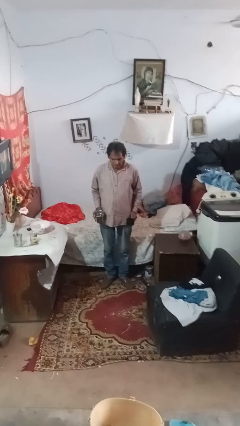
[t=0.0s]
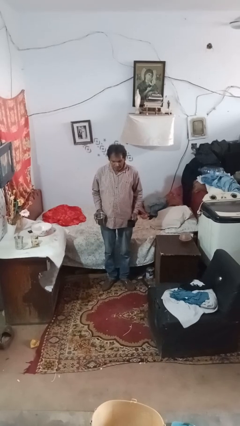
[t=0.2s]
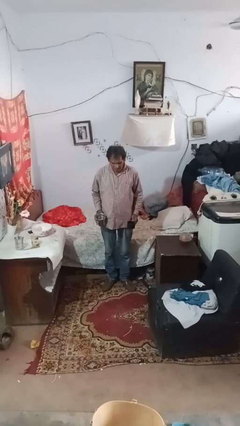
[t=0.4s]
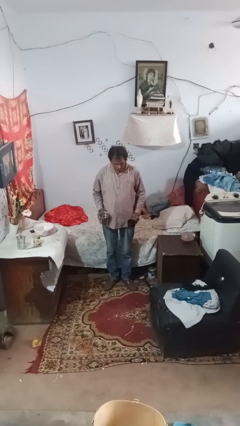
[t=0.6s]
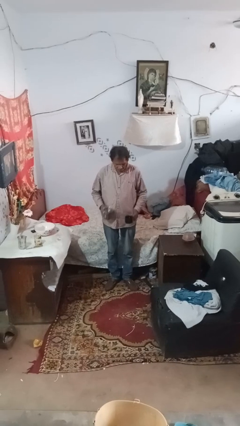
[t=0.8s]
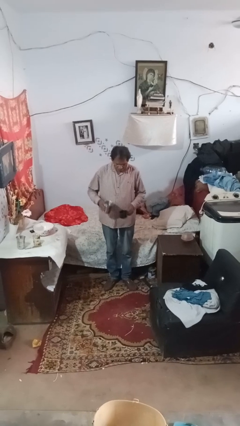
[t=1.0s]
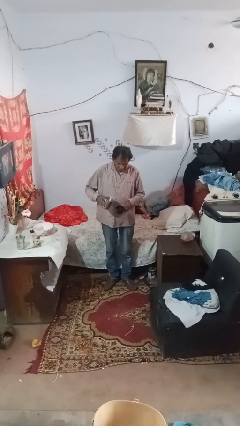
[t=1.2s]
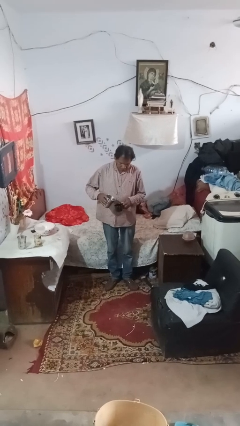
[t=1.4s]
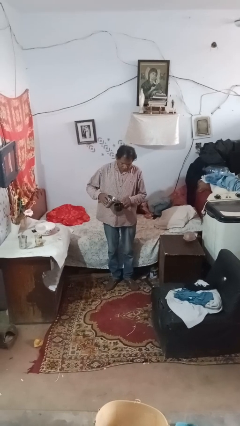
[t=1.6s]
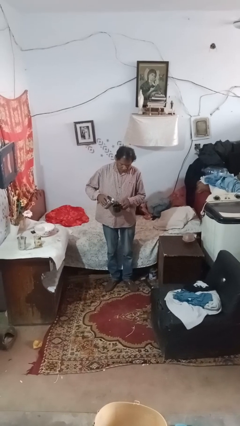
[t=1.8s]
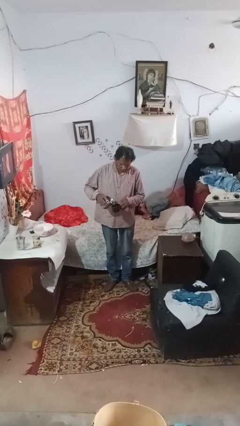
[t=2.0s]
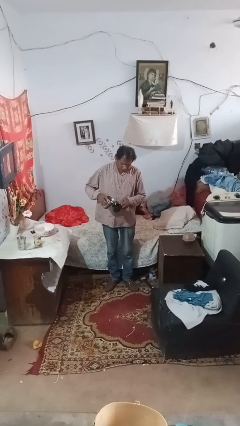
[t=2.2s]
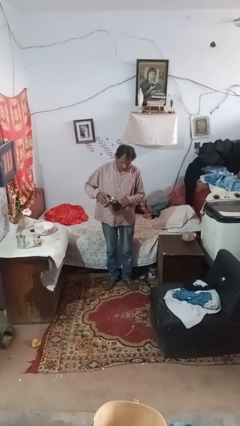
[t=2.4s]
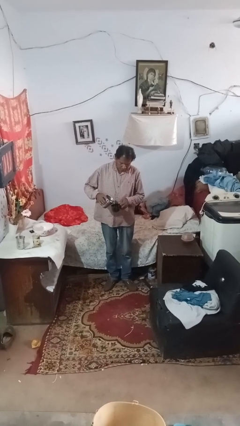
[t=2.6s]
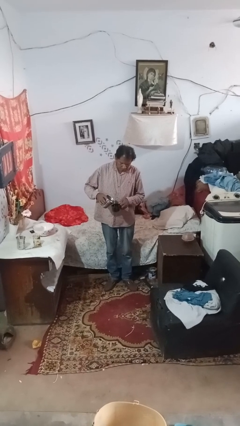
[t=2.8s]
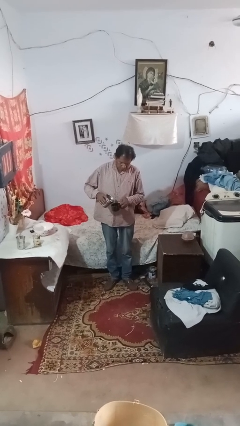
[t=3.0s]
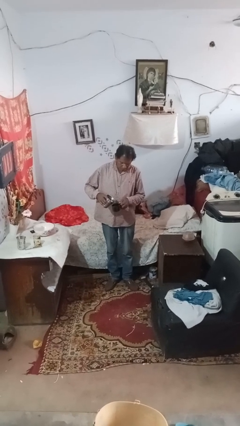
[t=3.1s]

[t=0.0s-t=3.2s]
person pours liquid into cup

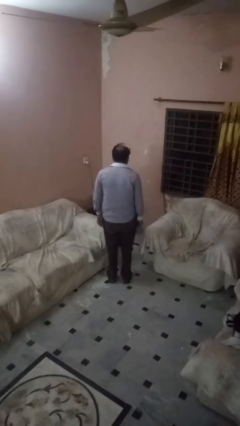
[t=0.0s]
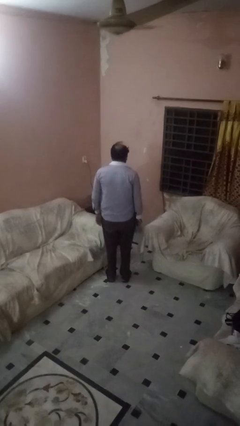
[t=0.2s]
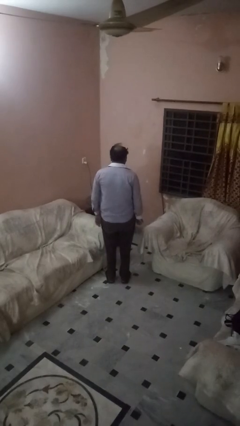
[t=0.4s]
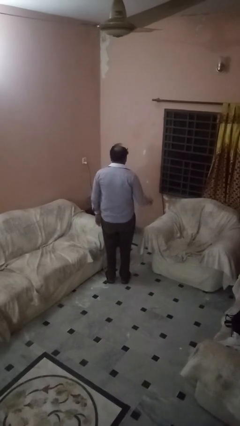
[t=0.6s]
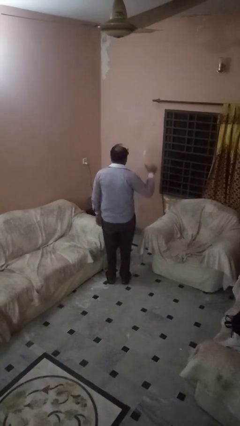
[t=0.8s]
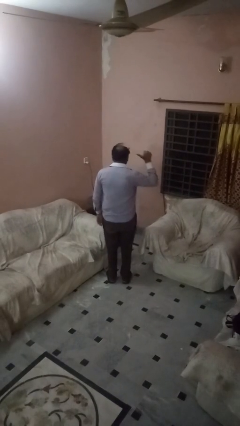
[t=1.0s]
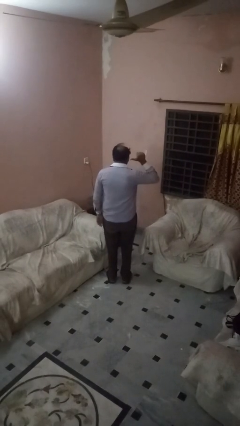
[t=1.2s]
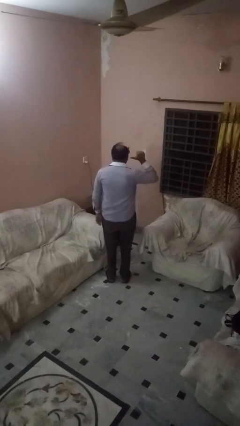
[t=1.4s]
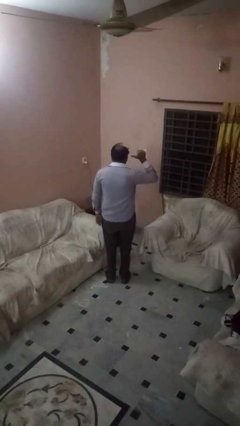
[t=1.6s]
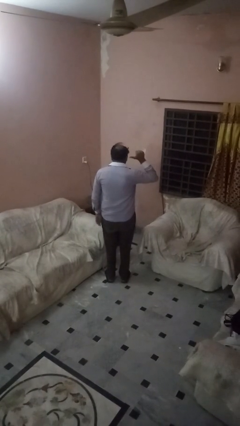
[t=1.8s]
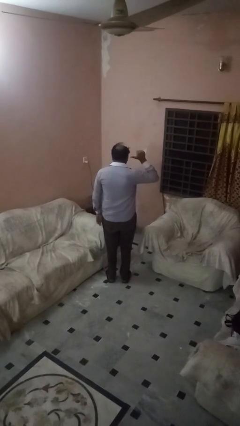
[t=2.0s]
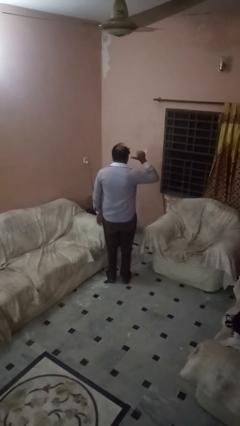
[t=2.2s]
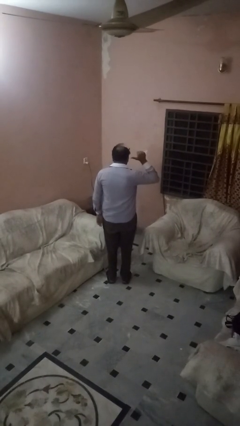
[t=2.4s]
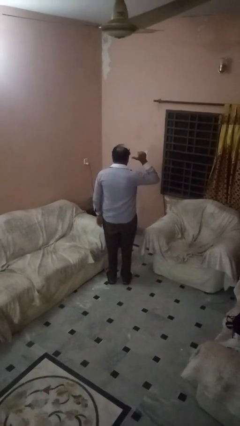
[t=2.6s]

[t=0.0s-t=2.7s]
person gestures behind me

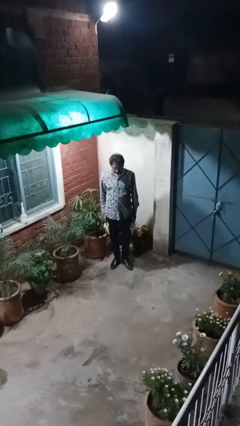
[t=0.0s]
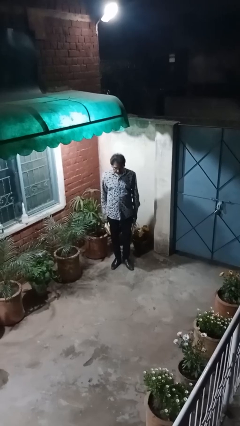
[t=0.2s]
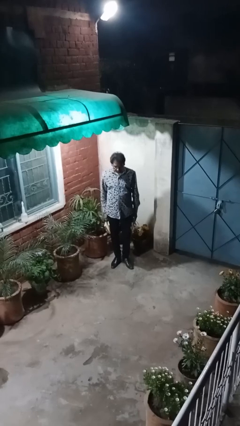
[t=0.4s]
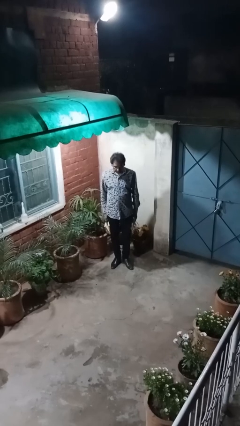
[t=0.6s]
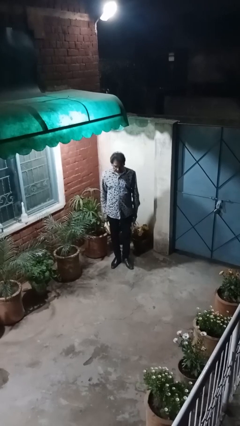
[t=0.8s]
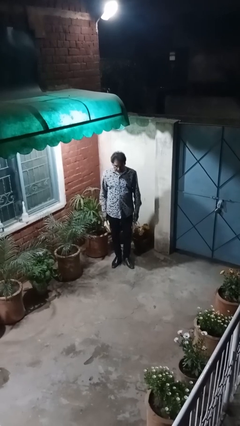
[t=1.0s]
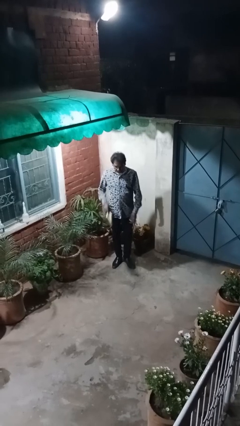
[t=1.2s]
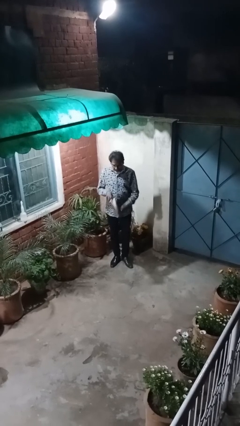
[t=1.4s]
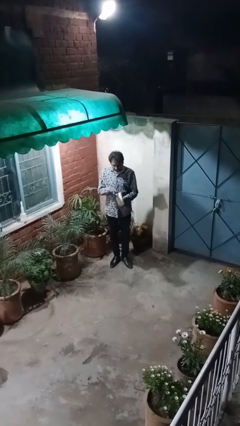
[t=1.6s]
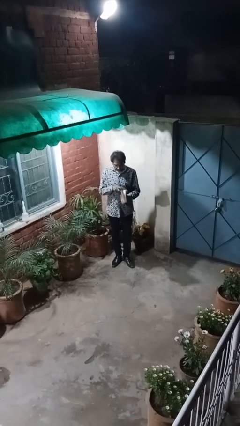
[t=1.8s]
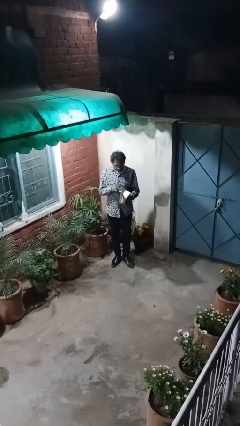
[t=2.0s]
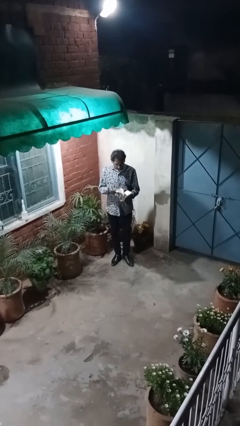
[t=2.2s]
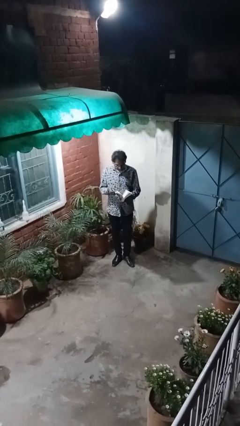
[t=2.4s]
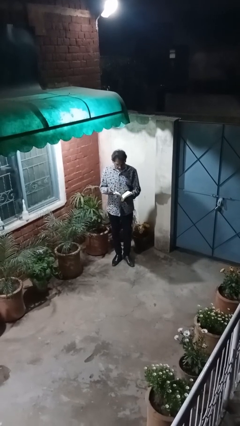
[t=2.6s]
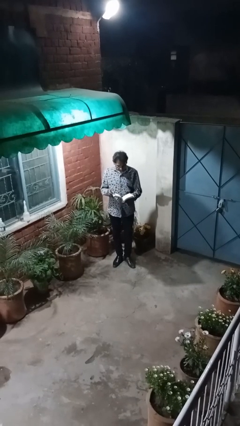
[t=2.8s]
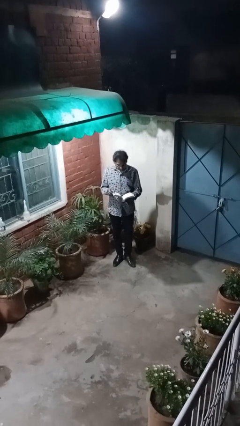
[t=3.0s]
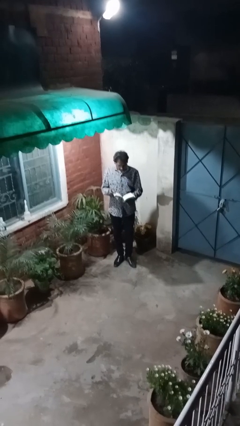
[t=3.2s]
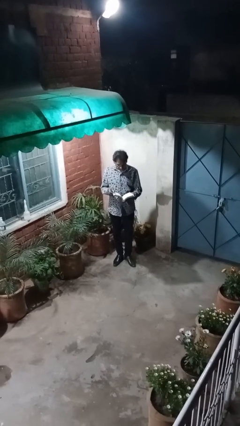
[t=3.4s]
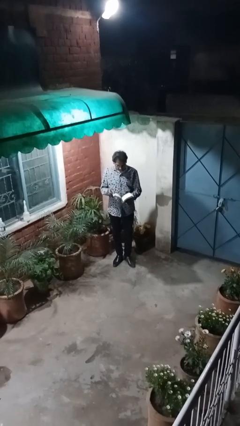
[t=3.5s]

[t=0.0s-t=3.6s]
person reads document

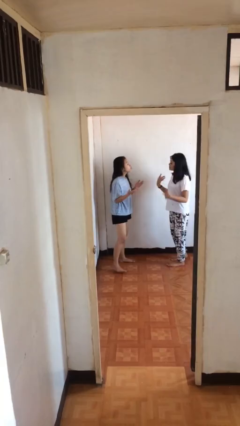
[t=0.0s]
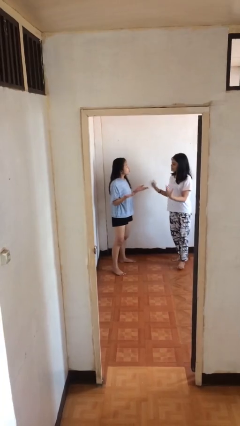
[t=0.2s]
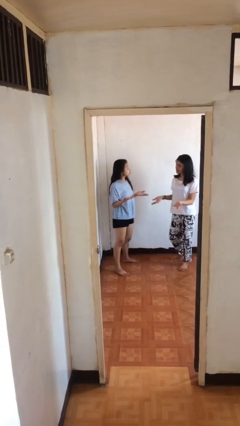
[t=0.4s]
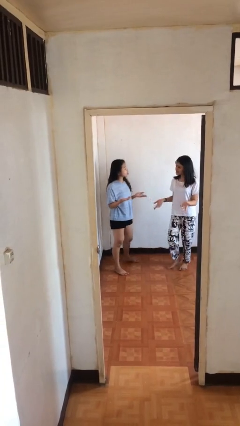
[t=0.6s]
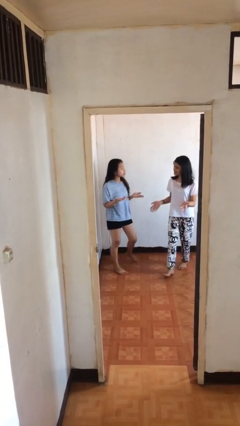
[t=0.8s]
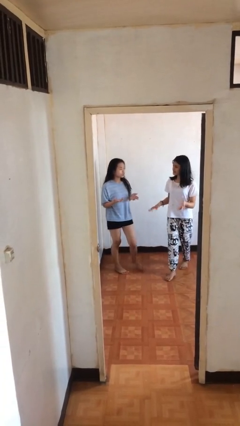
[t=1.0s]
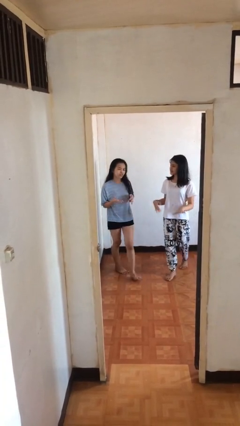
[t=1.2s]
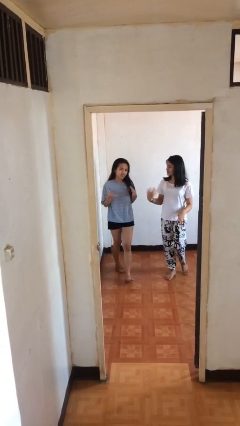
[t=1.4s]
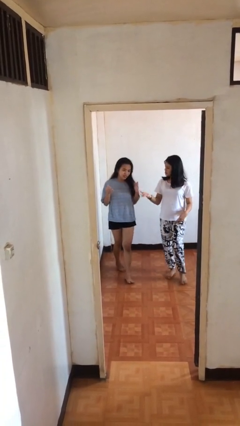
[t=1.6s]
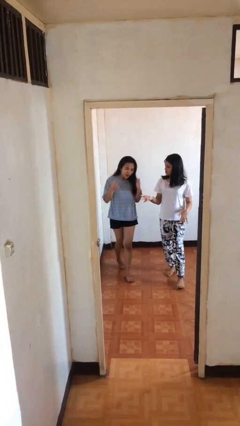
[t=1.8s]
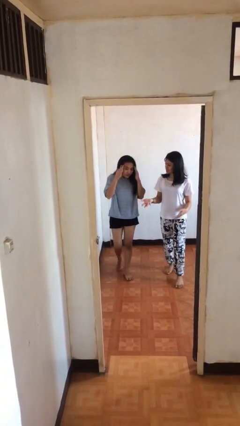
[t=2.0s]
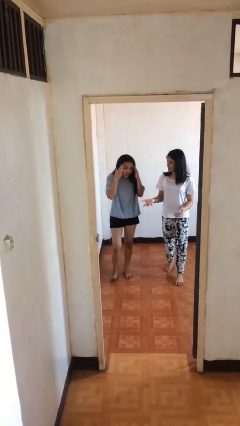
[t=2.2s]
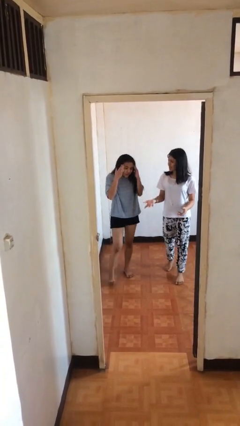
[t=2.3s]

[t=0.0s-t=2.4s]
person talks to person

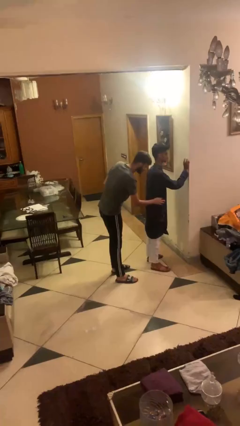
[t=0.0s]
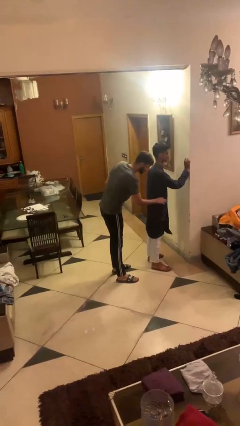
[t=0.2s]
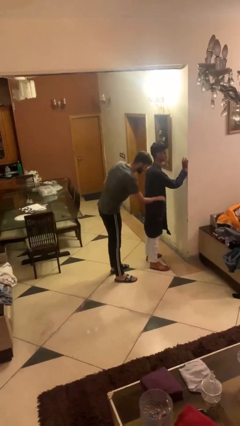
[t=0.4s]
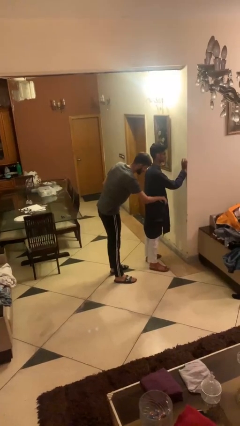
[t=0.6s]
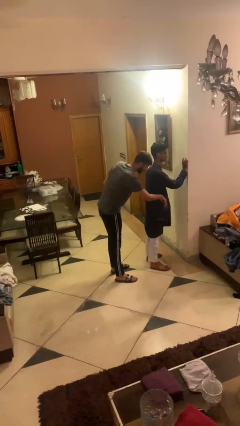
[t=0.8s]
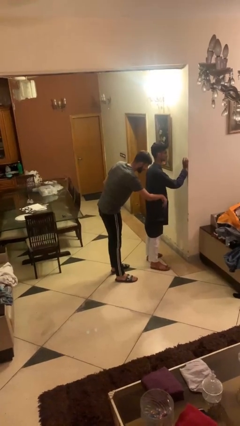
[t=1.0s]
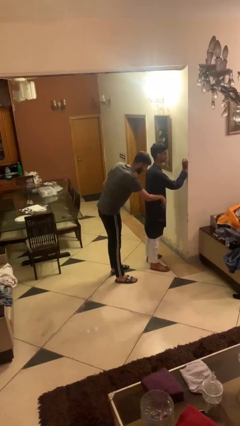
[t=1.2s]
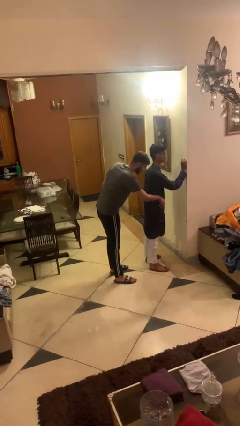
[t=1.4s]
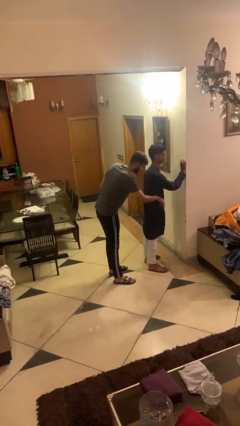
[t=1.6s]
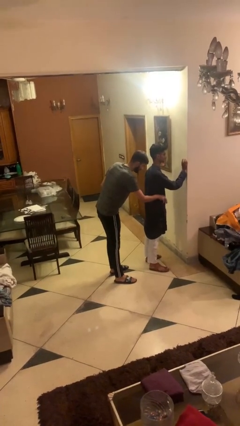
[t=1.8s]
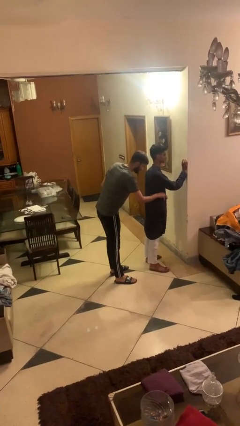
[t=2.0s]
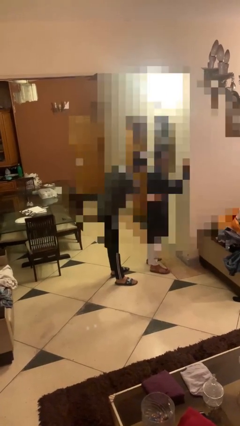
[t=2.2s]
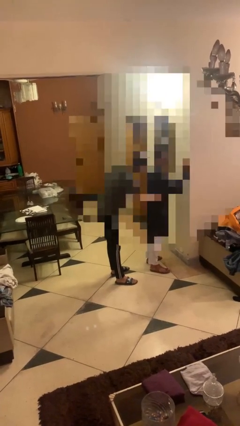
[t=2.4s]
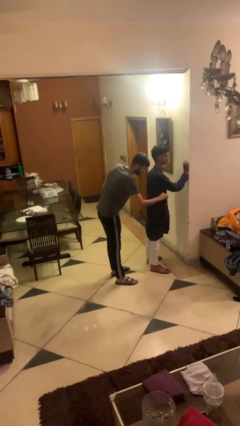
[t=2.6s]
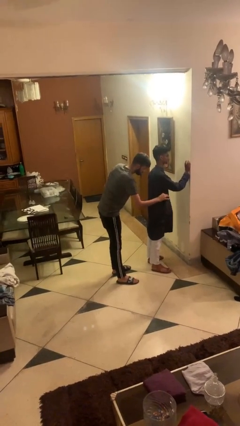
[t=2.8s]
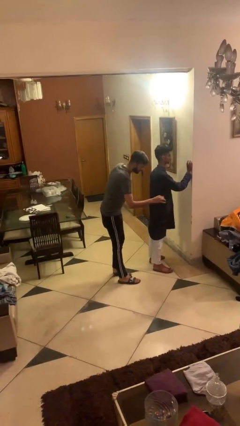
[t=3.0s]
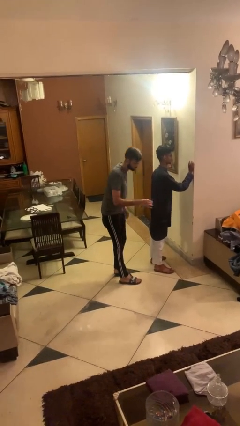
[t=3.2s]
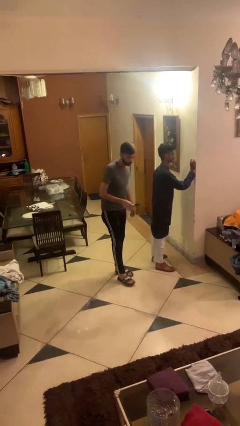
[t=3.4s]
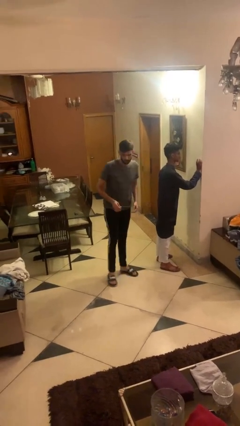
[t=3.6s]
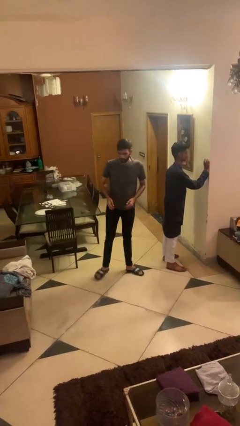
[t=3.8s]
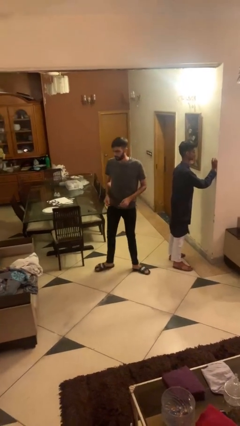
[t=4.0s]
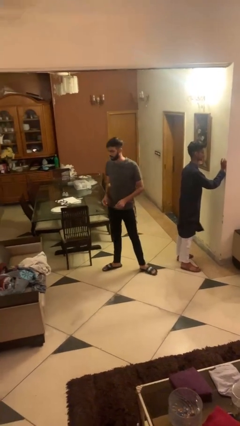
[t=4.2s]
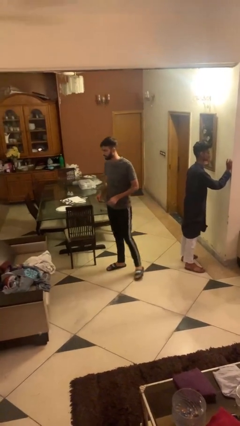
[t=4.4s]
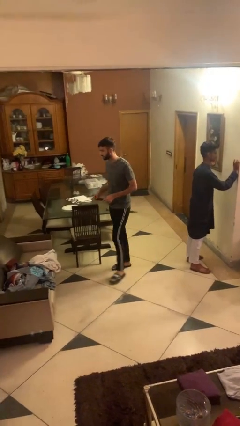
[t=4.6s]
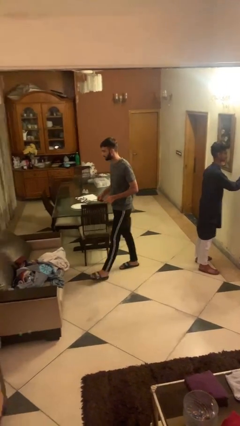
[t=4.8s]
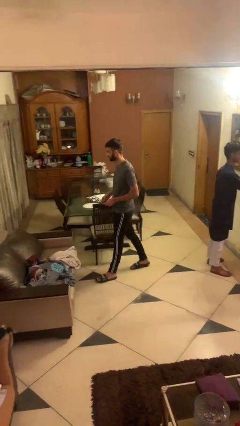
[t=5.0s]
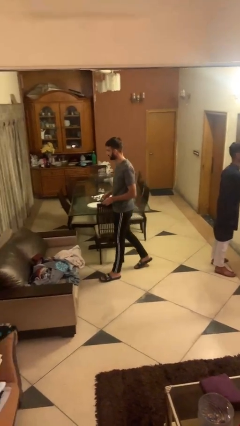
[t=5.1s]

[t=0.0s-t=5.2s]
person steals object from person

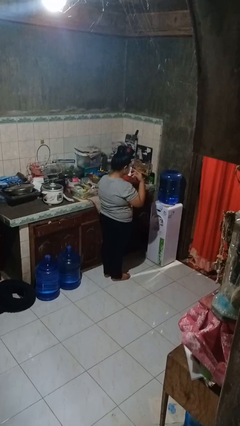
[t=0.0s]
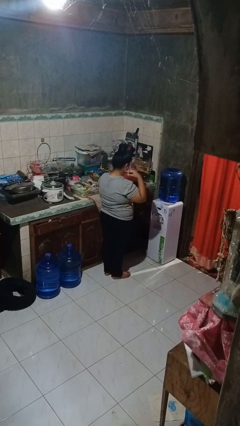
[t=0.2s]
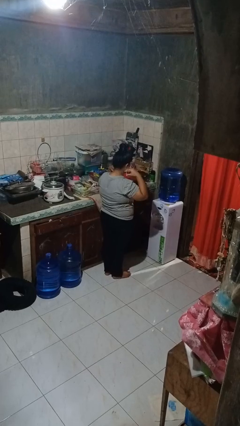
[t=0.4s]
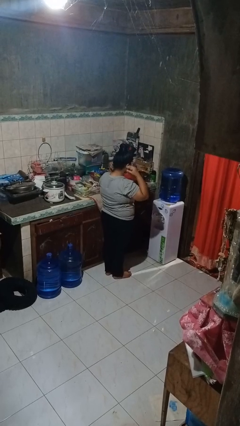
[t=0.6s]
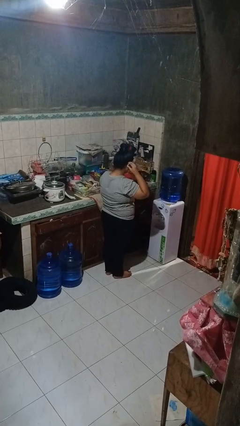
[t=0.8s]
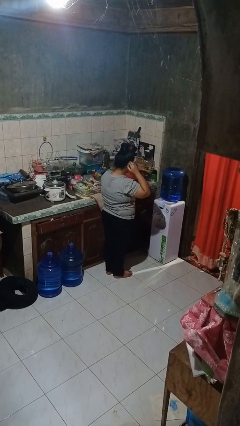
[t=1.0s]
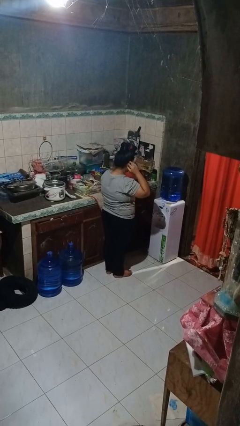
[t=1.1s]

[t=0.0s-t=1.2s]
person puts on facemask
